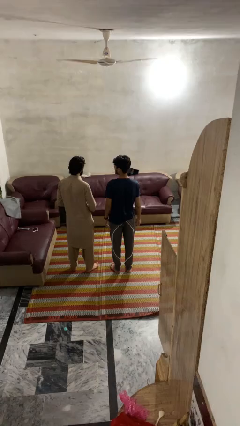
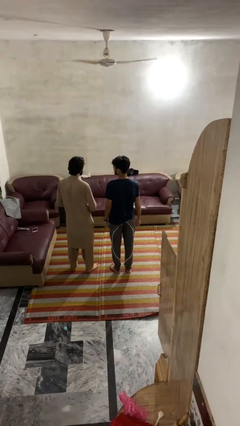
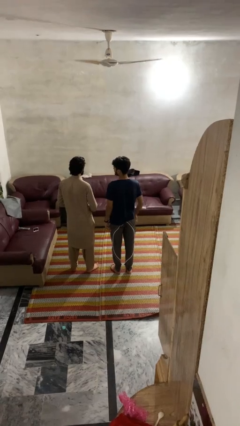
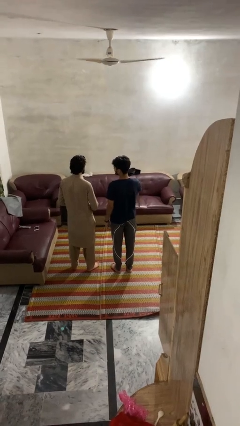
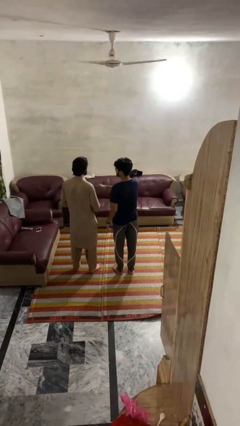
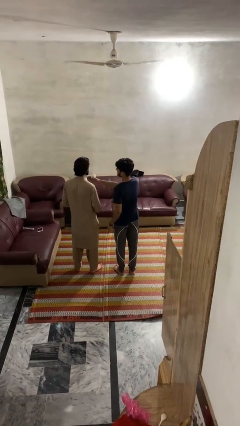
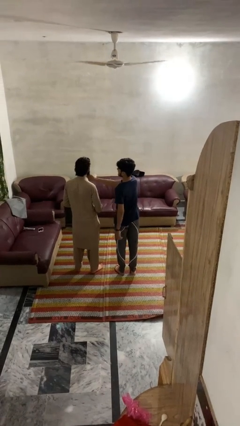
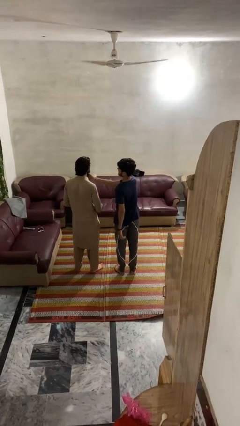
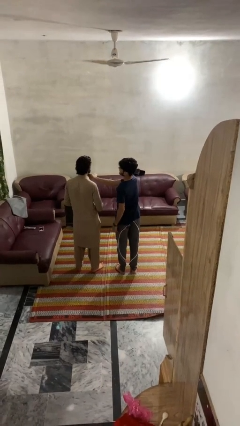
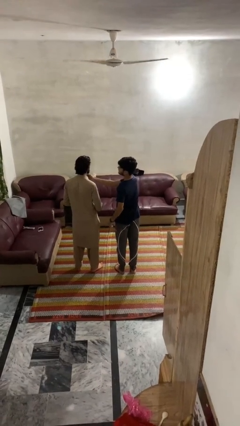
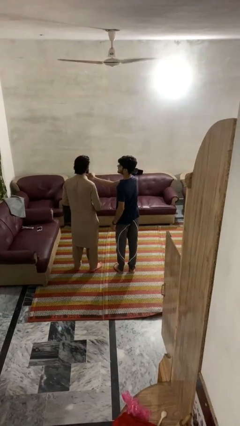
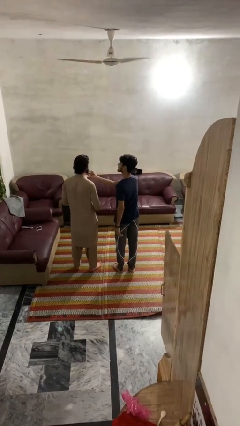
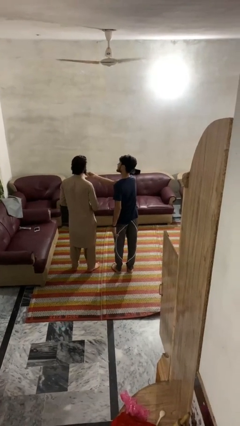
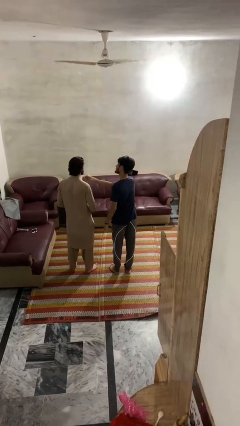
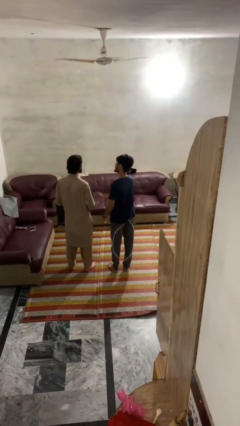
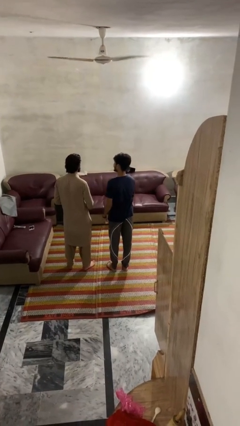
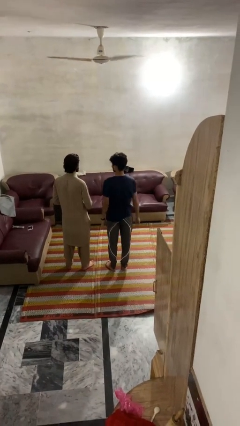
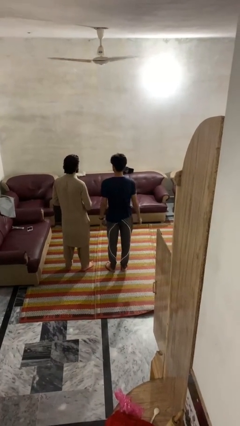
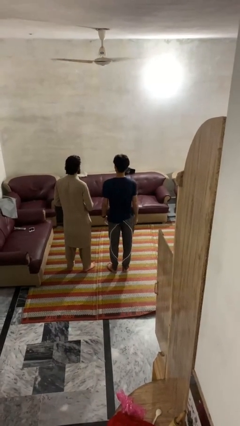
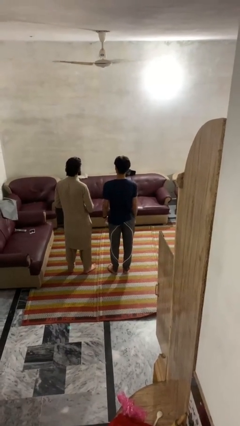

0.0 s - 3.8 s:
person touches face of person

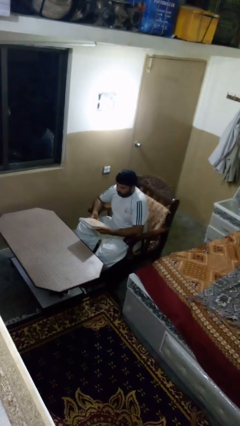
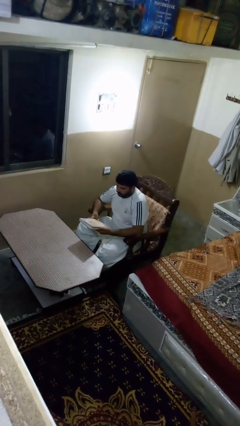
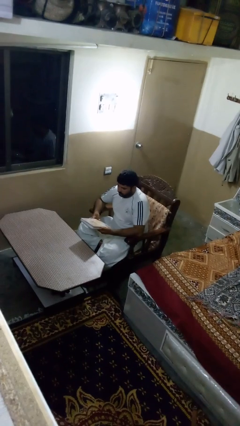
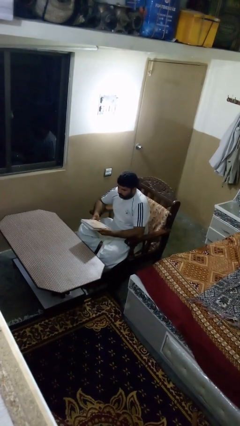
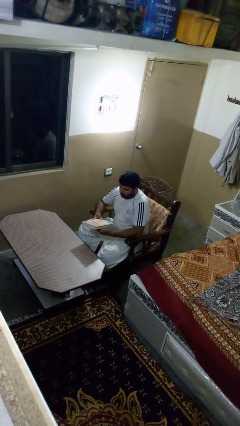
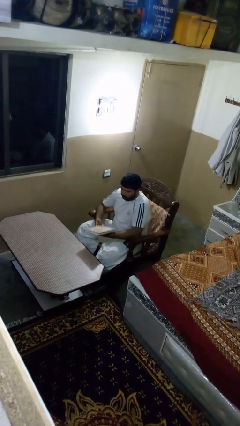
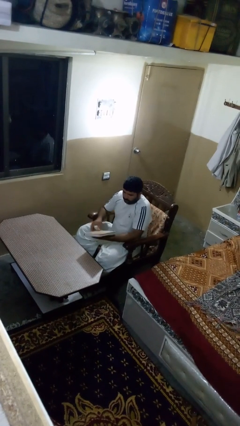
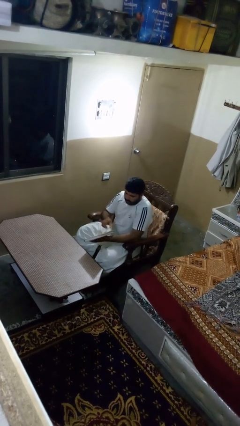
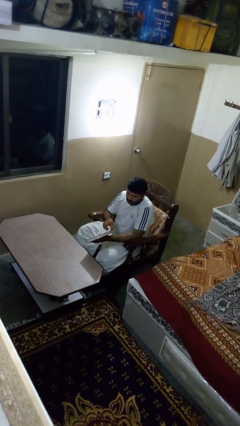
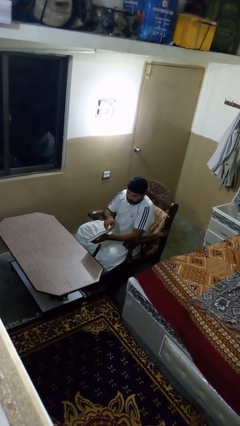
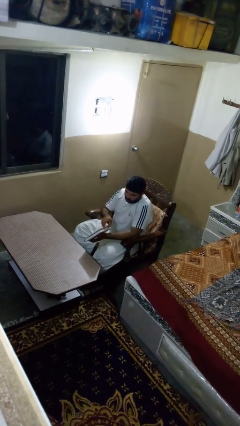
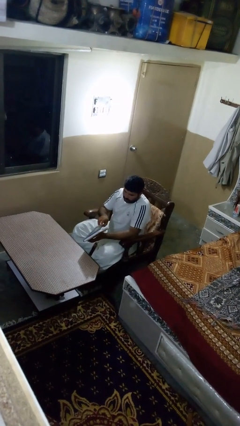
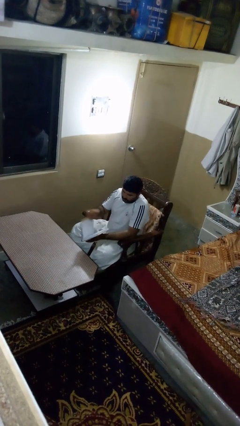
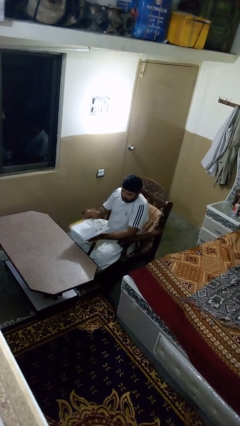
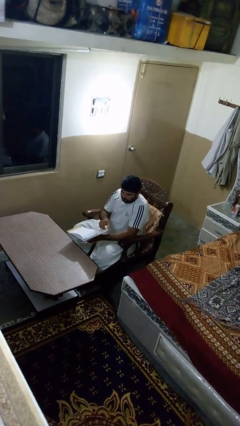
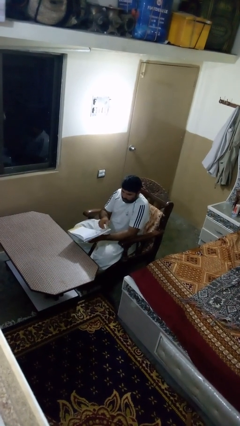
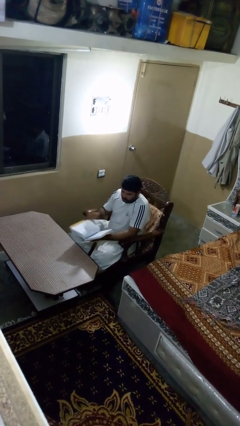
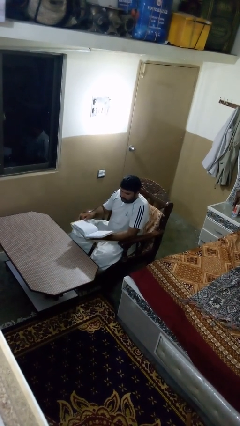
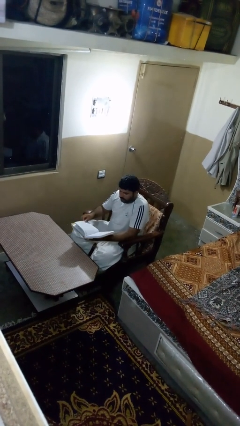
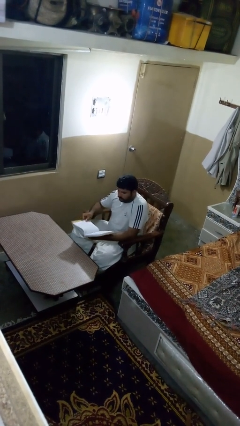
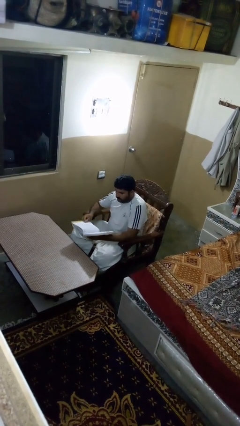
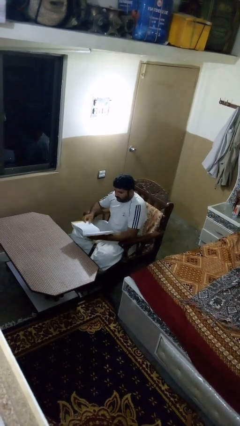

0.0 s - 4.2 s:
person reads book

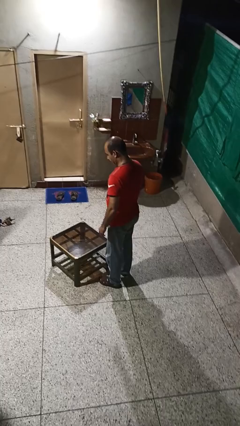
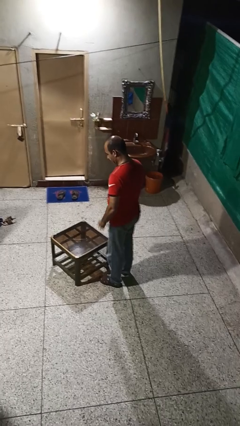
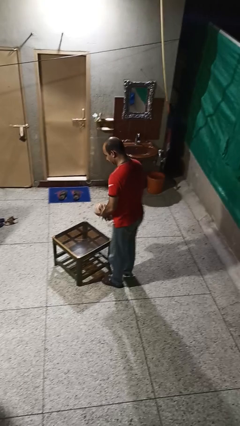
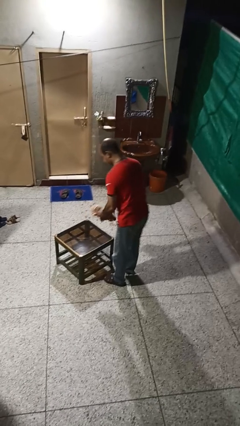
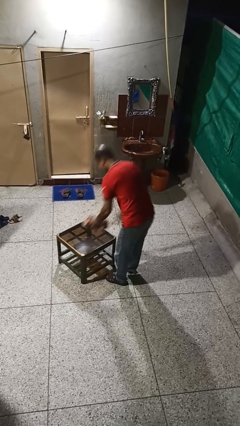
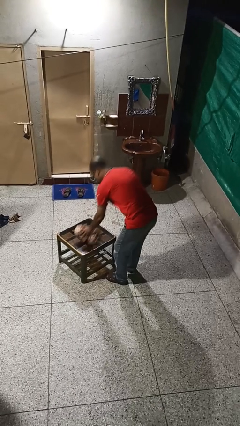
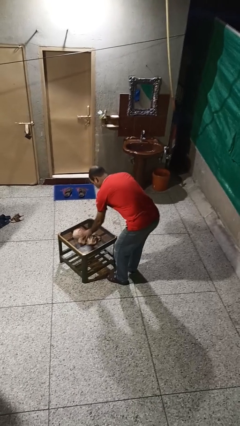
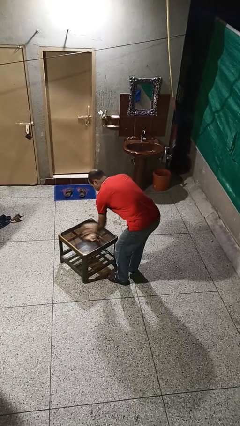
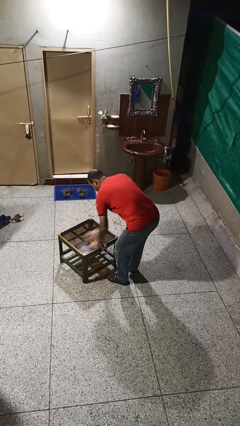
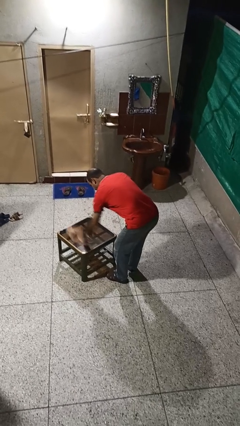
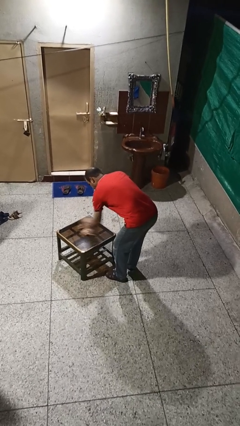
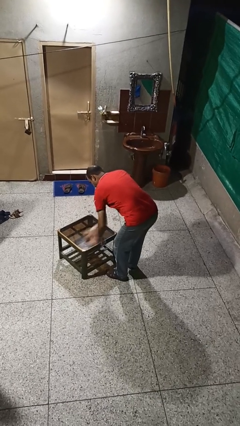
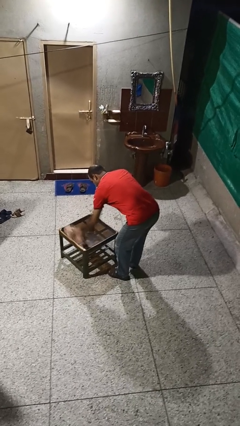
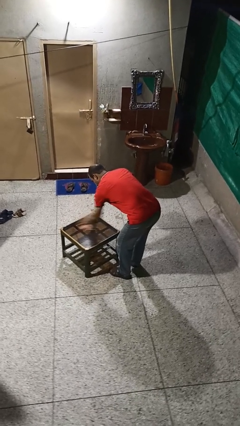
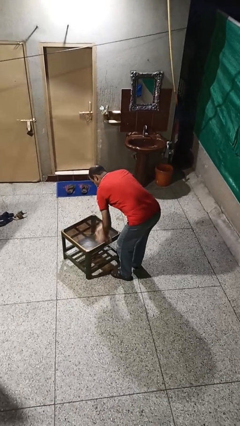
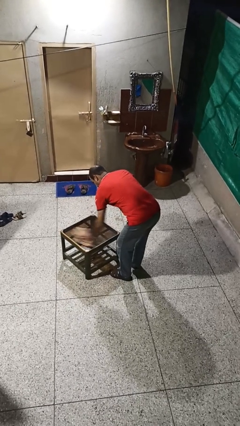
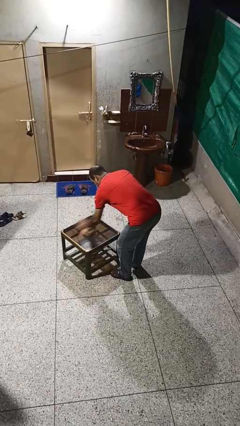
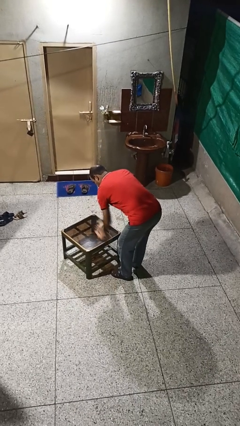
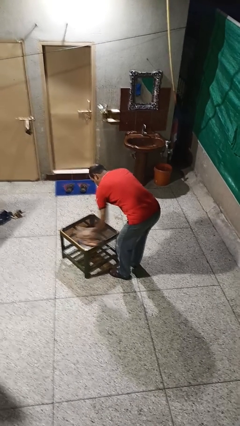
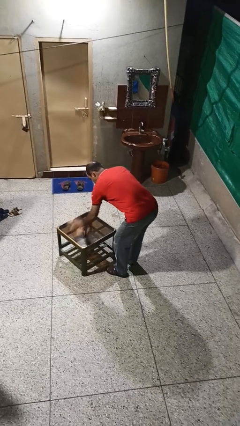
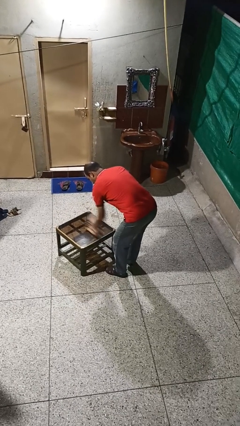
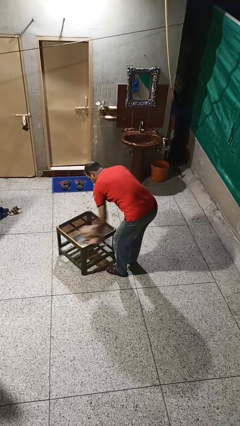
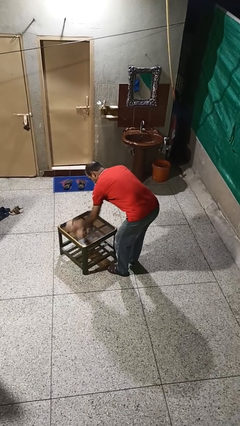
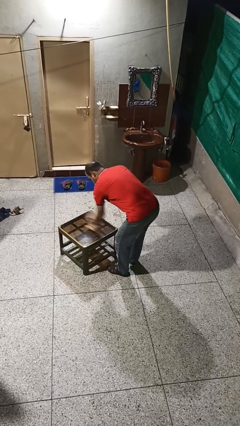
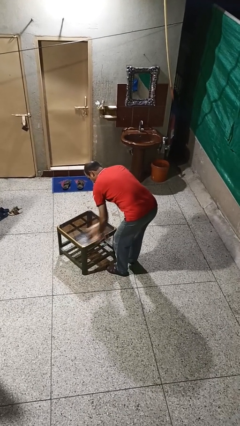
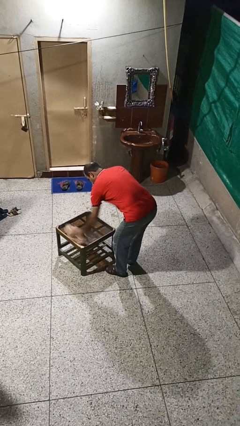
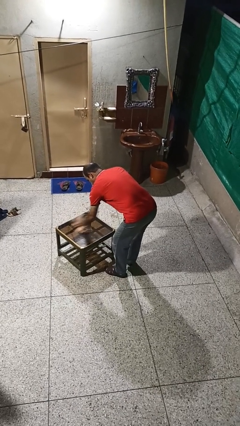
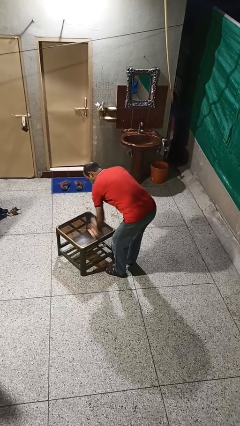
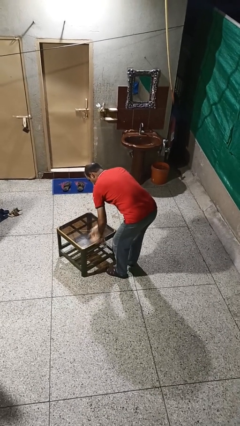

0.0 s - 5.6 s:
person cleans table with rag

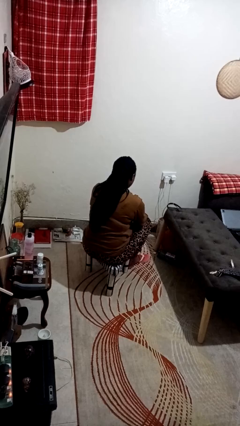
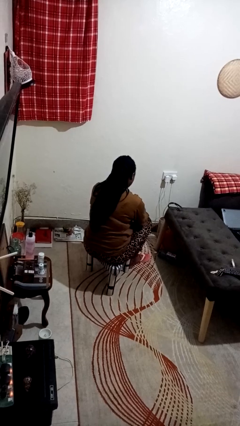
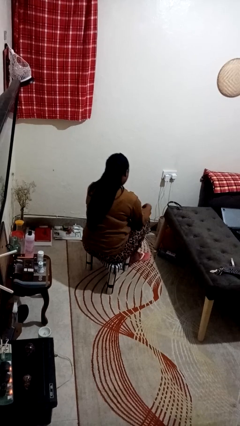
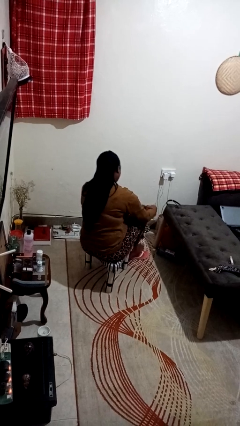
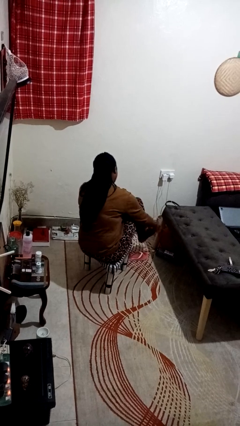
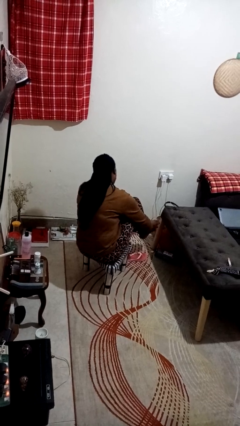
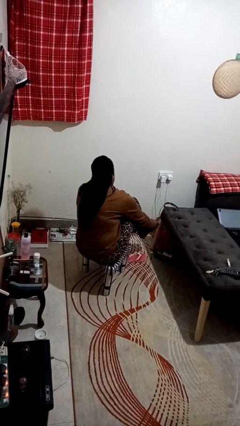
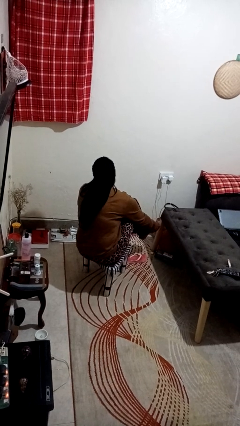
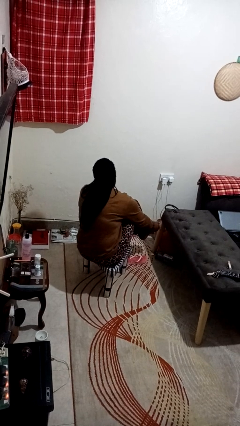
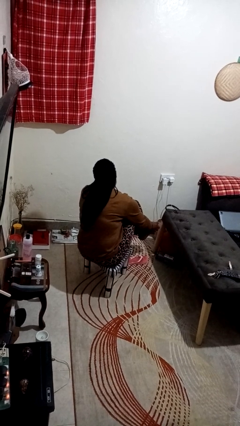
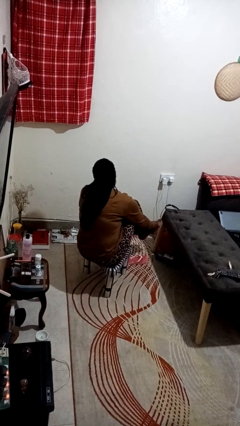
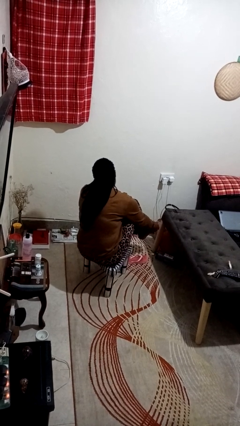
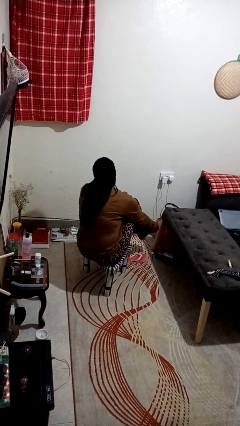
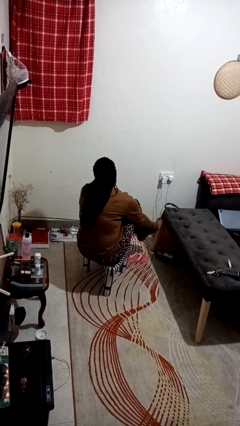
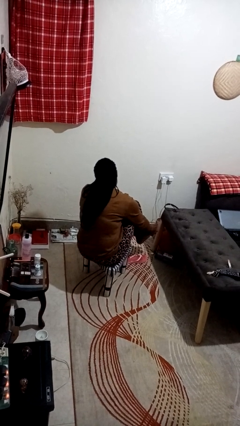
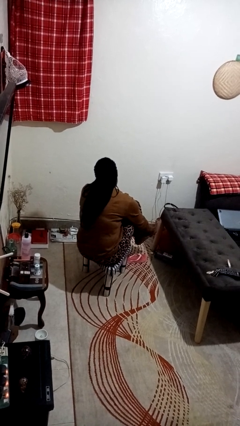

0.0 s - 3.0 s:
person rubs foot

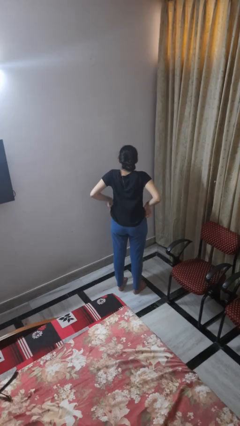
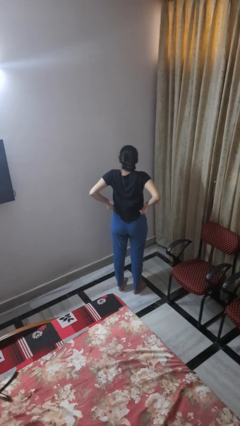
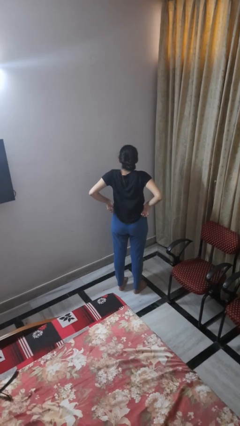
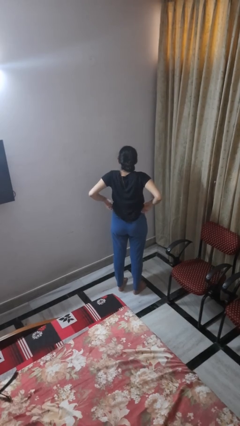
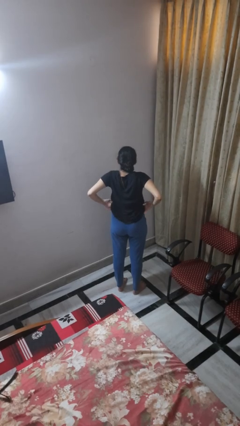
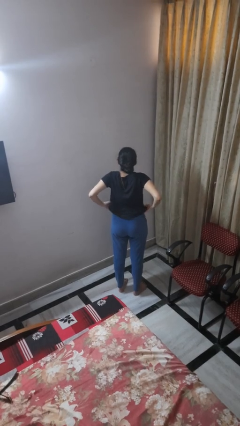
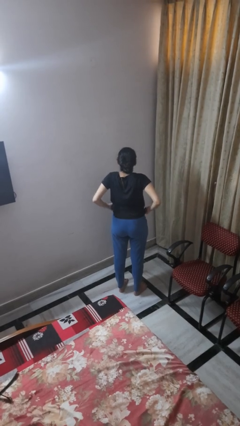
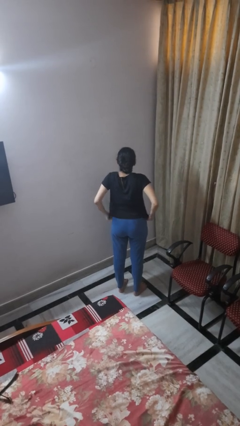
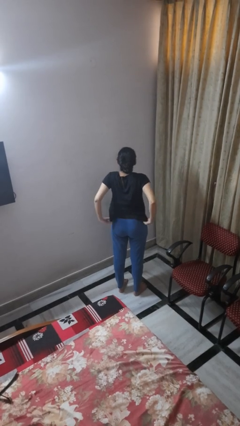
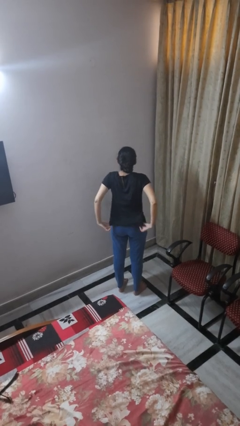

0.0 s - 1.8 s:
person hikes up pants
